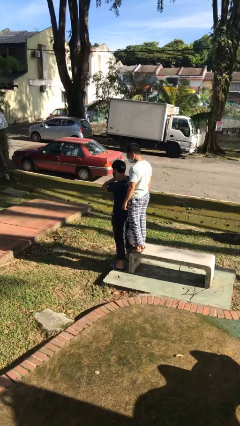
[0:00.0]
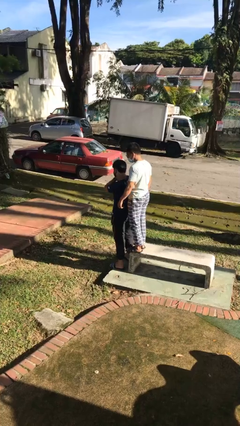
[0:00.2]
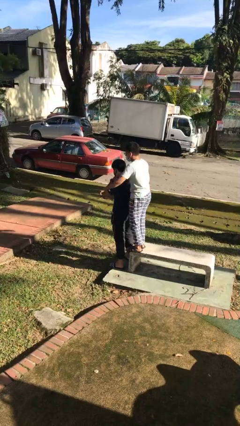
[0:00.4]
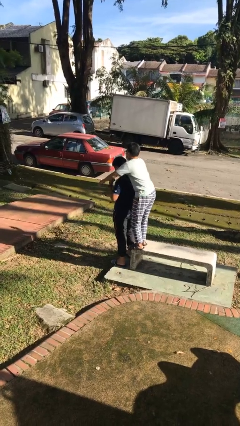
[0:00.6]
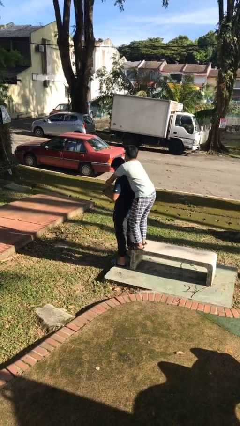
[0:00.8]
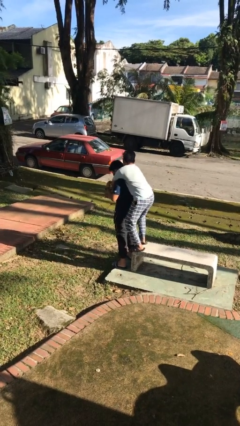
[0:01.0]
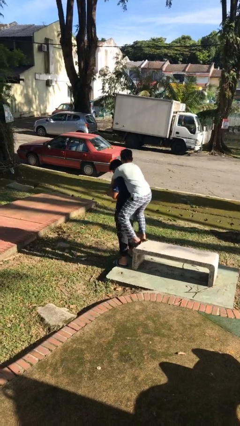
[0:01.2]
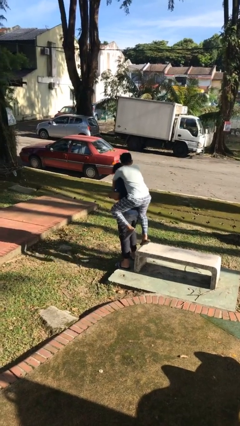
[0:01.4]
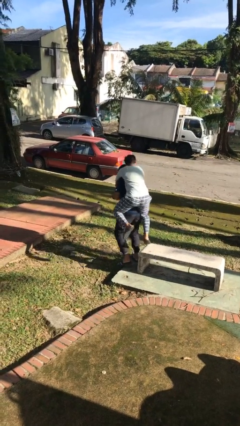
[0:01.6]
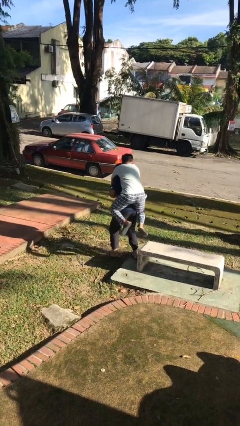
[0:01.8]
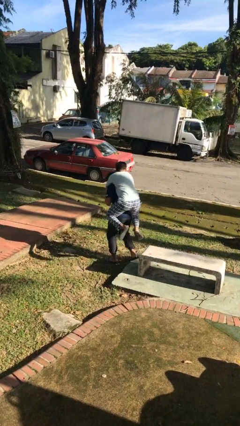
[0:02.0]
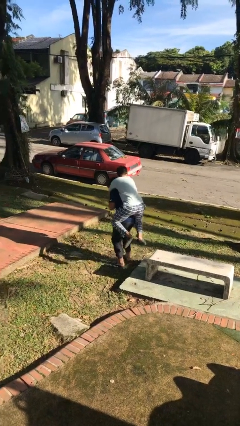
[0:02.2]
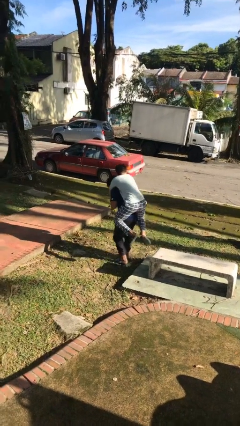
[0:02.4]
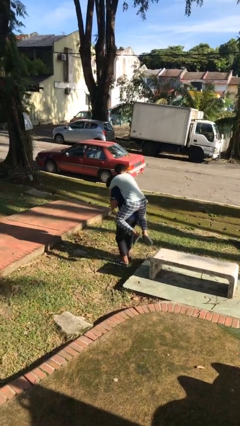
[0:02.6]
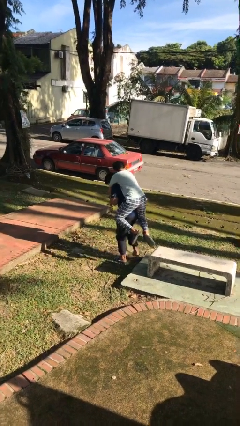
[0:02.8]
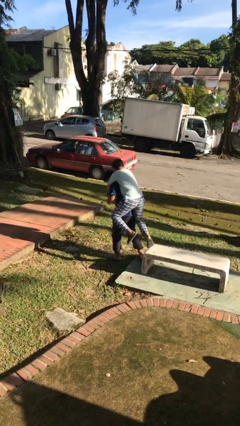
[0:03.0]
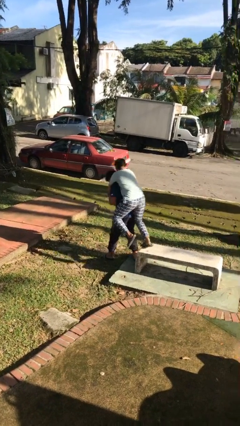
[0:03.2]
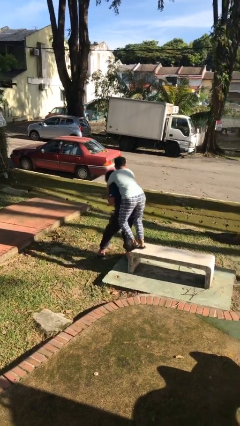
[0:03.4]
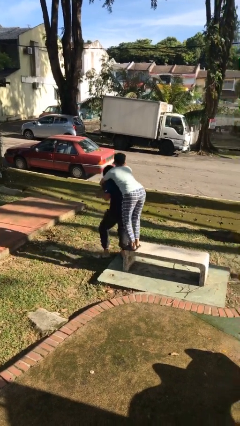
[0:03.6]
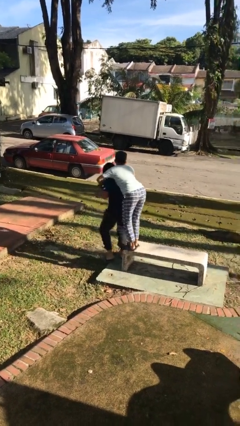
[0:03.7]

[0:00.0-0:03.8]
person carries person on back

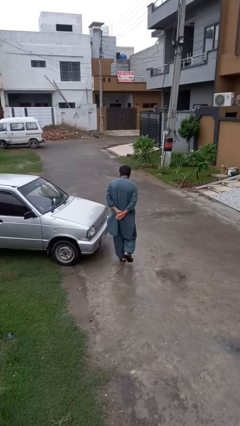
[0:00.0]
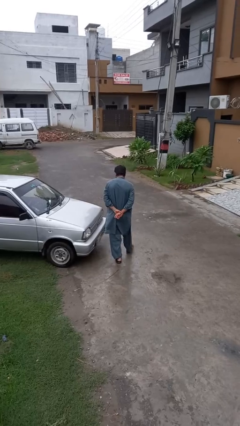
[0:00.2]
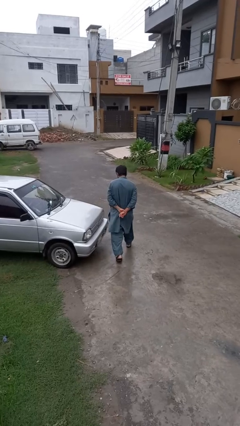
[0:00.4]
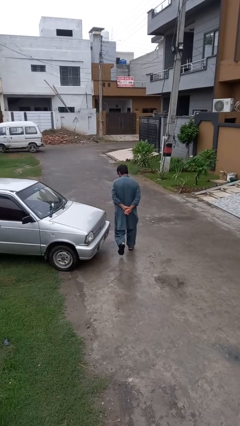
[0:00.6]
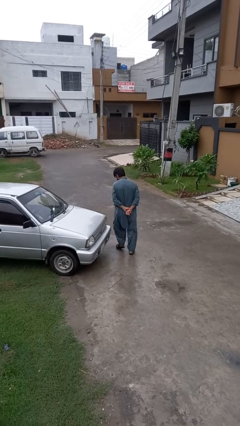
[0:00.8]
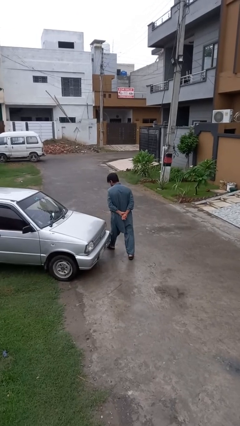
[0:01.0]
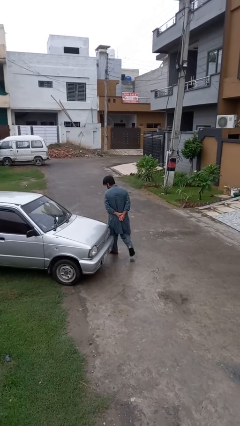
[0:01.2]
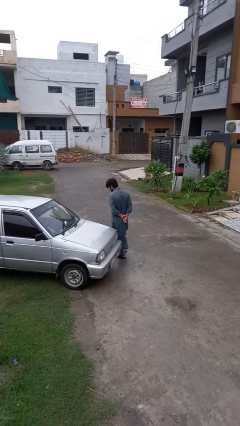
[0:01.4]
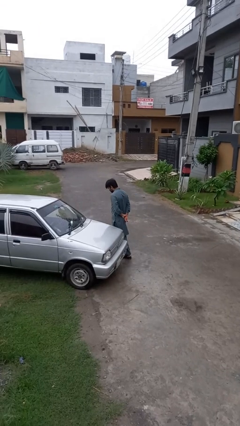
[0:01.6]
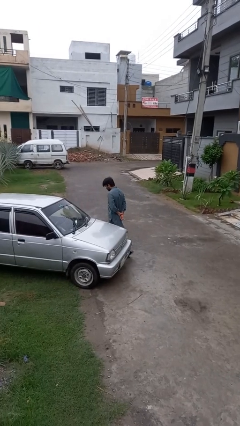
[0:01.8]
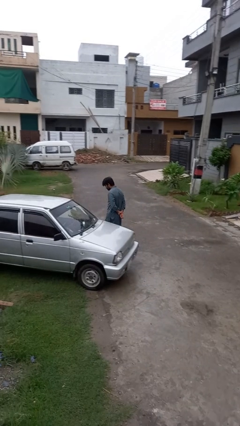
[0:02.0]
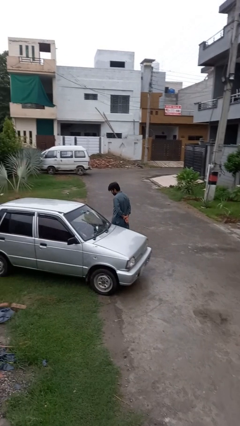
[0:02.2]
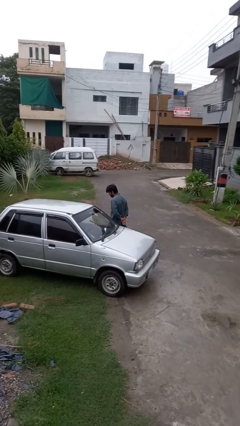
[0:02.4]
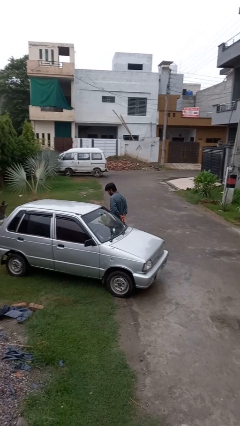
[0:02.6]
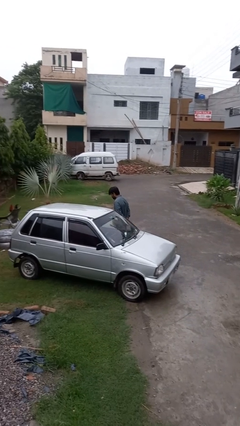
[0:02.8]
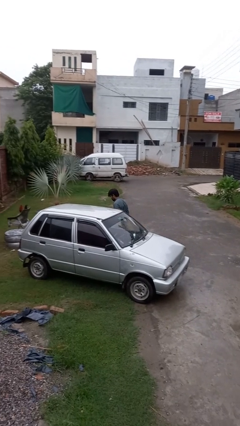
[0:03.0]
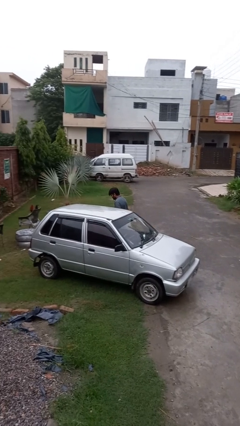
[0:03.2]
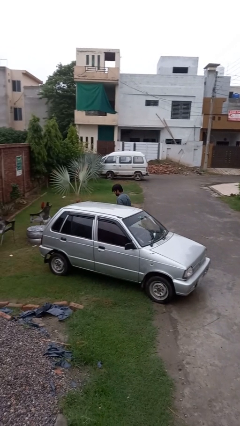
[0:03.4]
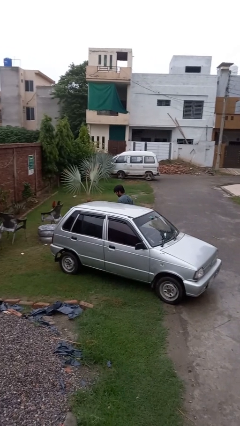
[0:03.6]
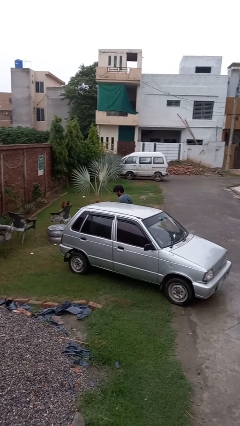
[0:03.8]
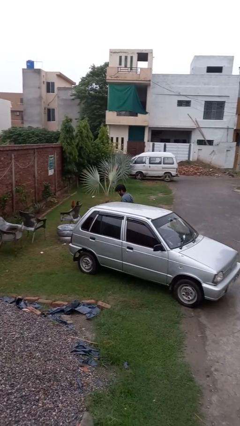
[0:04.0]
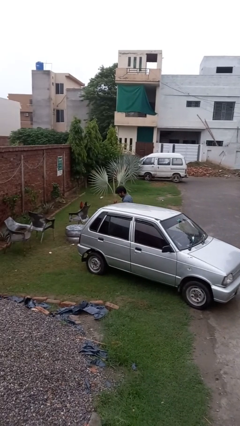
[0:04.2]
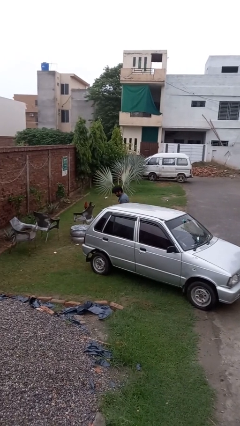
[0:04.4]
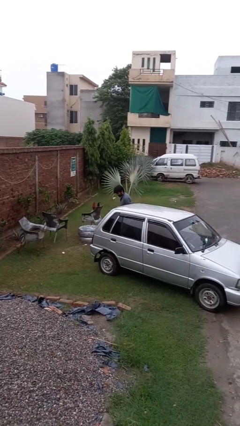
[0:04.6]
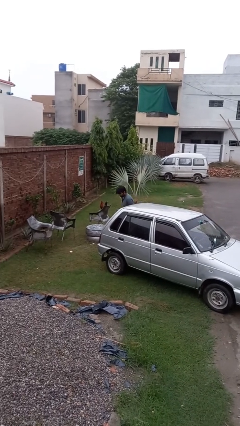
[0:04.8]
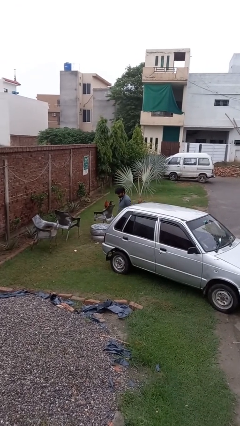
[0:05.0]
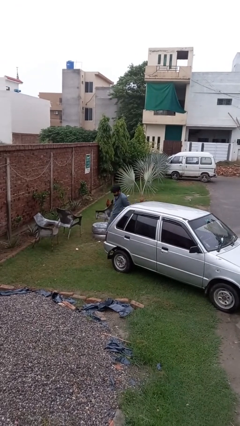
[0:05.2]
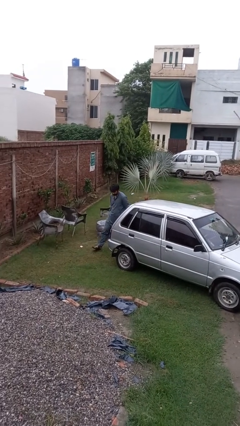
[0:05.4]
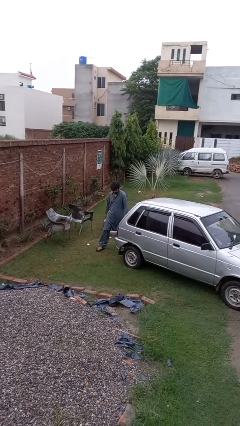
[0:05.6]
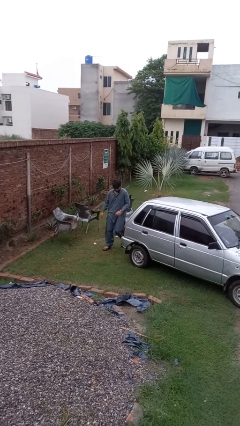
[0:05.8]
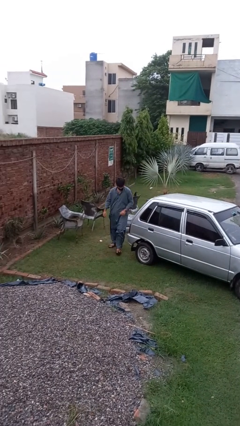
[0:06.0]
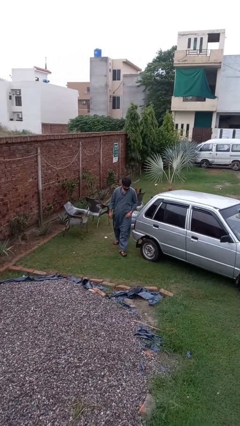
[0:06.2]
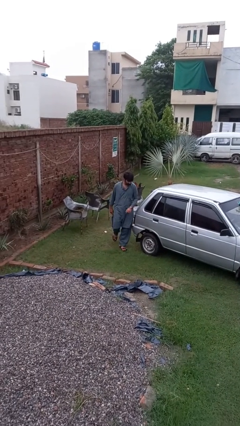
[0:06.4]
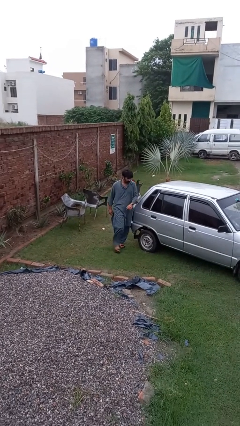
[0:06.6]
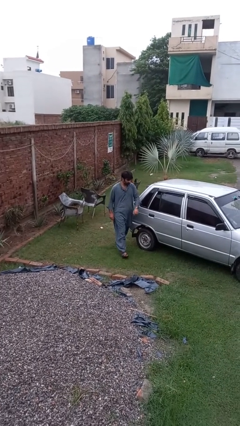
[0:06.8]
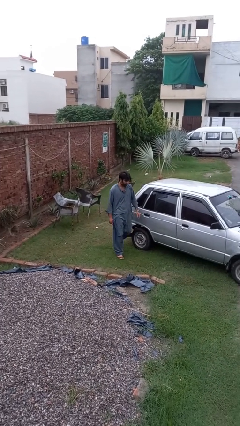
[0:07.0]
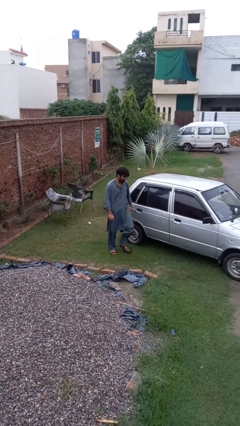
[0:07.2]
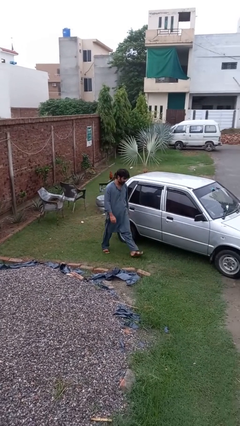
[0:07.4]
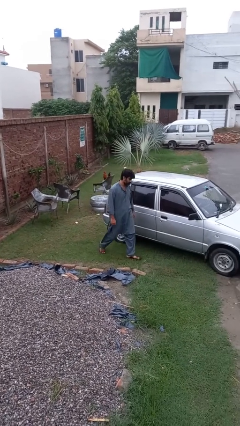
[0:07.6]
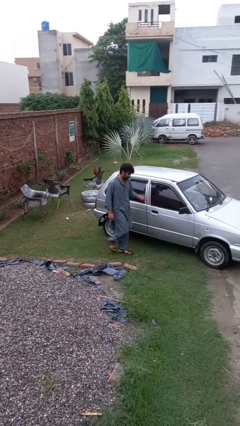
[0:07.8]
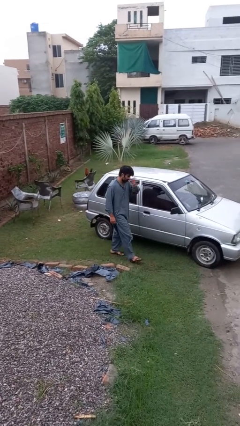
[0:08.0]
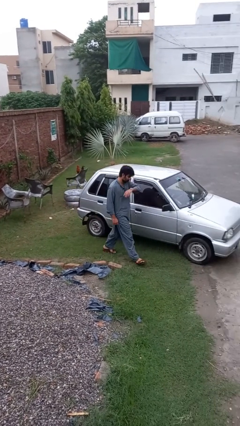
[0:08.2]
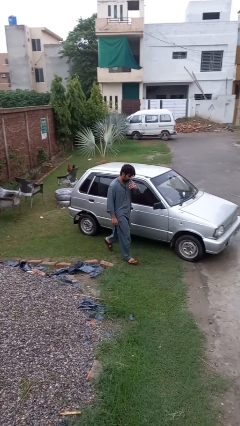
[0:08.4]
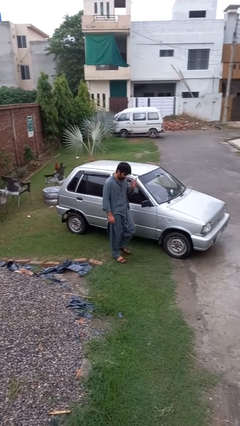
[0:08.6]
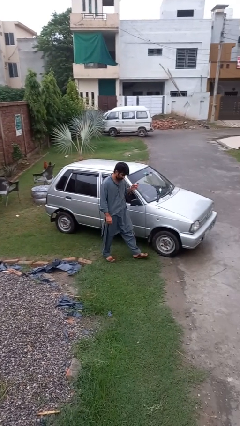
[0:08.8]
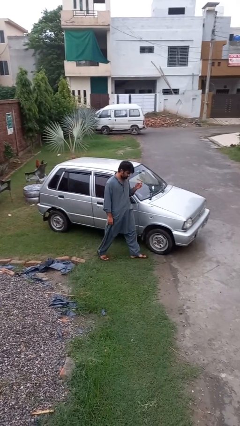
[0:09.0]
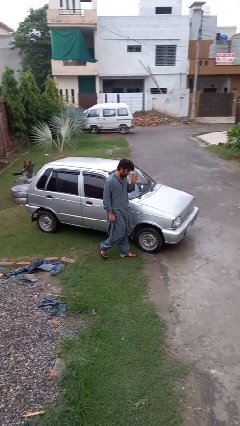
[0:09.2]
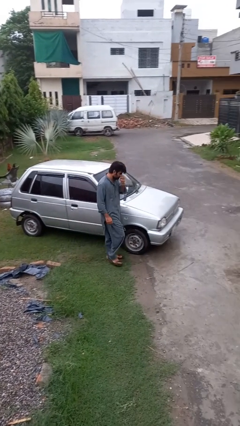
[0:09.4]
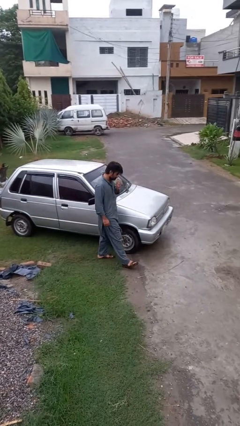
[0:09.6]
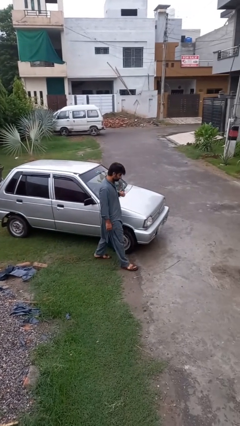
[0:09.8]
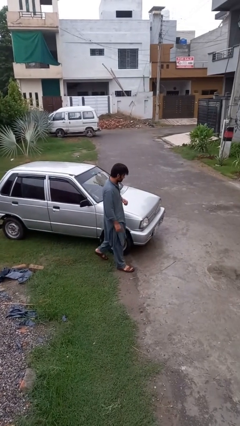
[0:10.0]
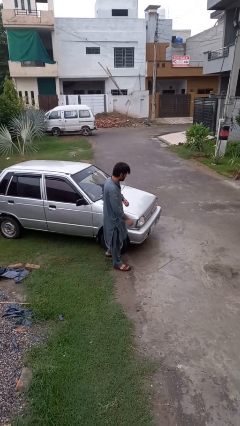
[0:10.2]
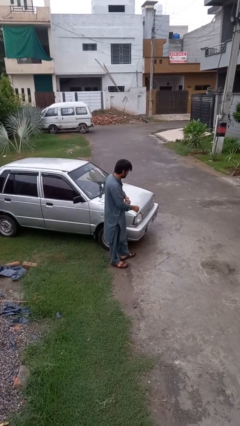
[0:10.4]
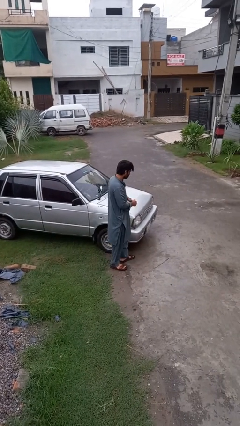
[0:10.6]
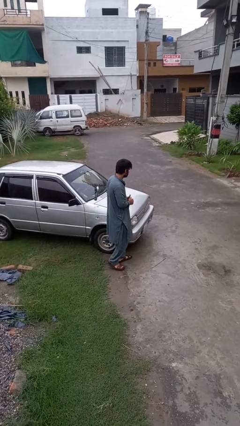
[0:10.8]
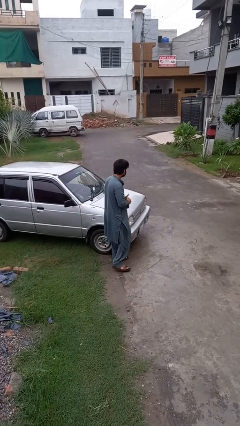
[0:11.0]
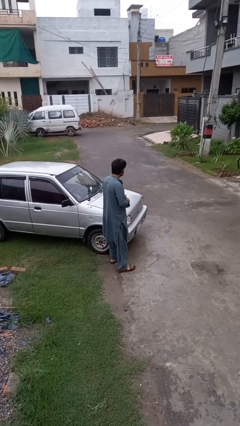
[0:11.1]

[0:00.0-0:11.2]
person walks around car

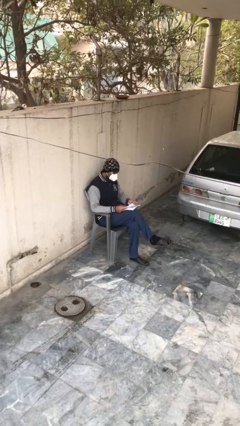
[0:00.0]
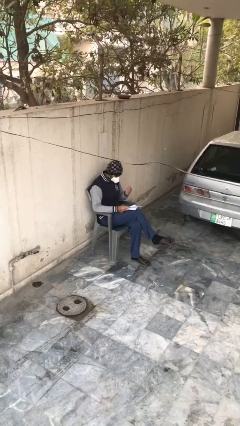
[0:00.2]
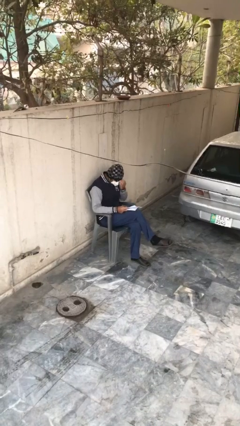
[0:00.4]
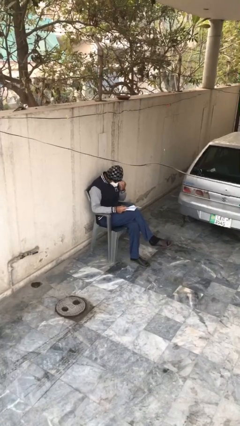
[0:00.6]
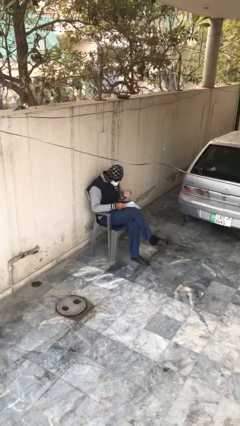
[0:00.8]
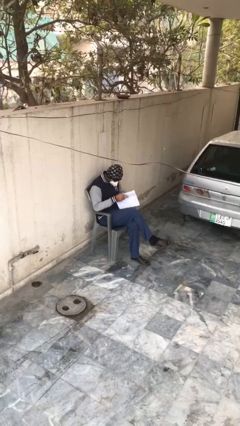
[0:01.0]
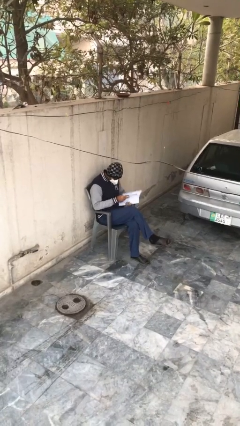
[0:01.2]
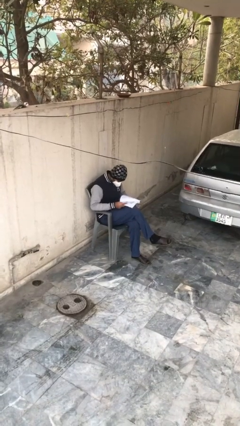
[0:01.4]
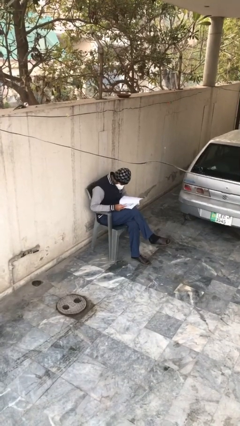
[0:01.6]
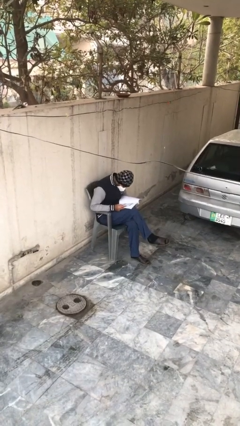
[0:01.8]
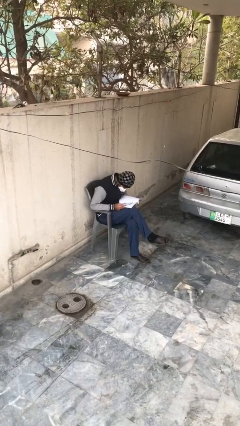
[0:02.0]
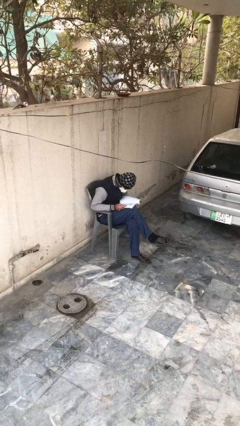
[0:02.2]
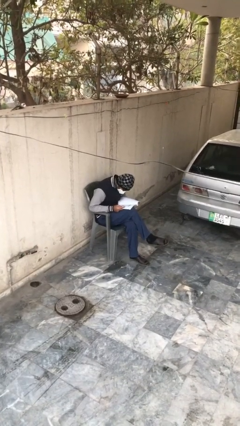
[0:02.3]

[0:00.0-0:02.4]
person reads document

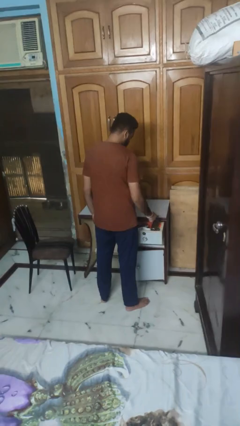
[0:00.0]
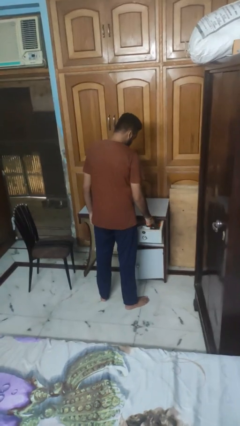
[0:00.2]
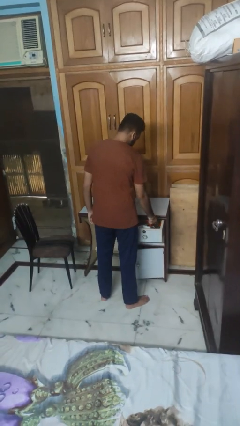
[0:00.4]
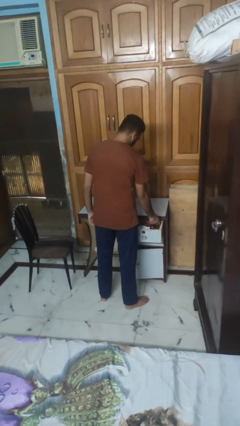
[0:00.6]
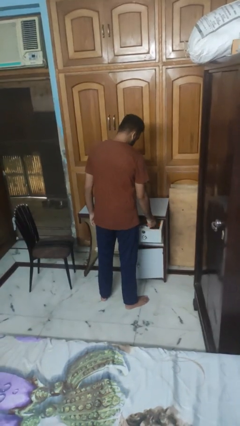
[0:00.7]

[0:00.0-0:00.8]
person puts object into kitchen drawer
